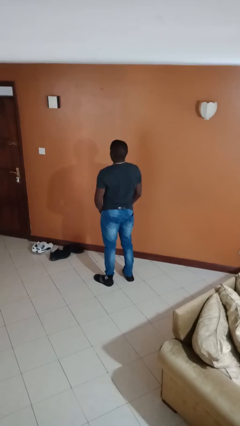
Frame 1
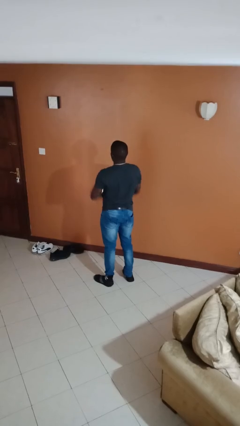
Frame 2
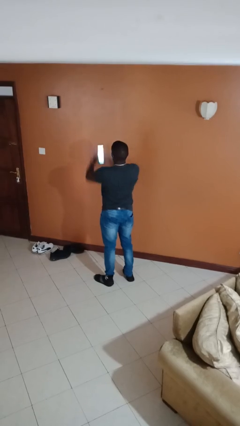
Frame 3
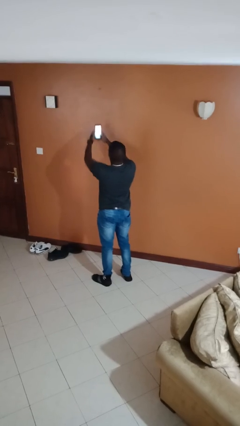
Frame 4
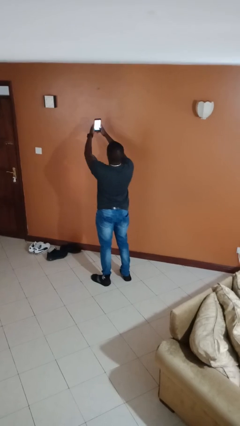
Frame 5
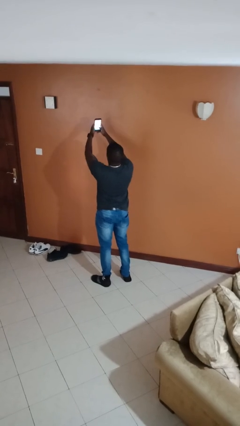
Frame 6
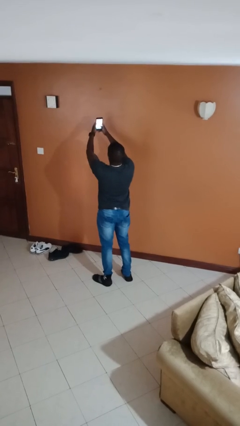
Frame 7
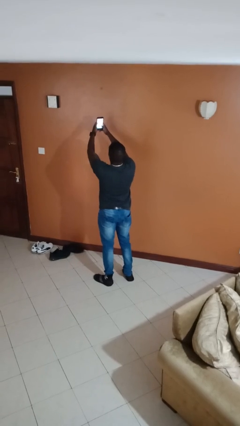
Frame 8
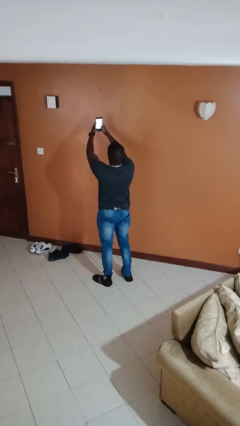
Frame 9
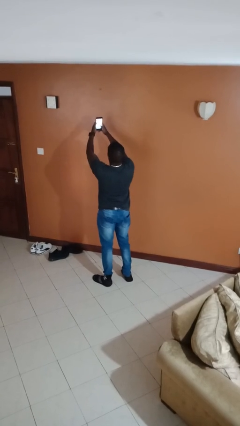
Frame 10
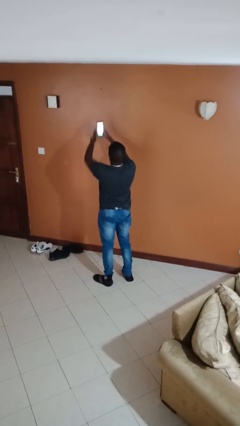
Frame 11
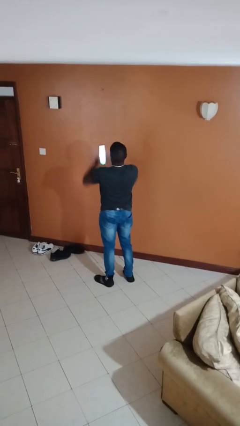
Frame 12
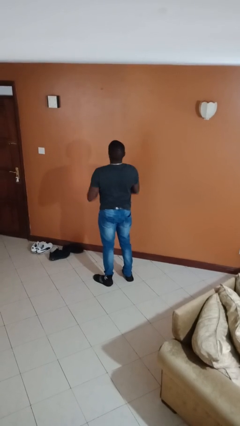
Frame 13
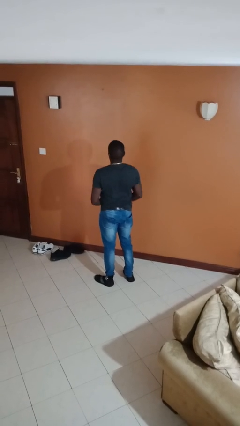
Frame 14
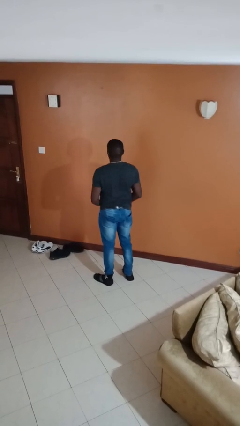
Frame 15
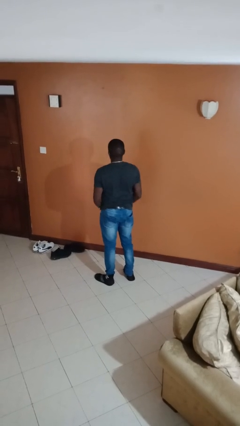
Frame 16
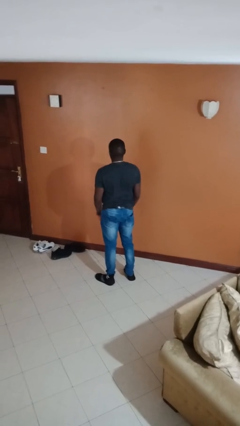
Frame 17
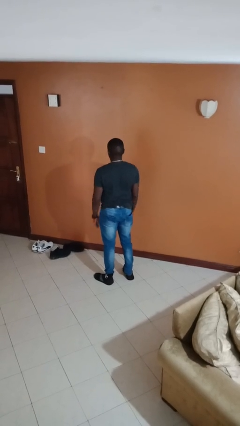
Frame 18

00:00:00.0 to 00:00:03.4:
person takes selfie

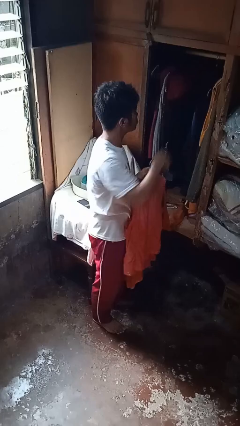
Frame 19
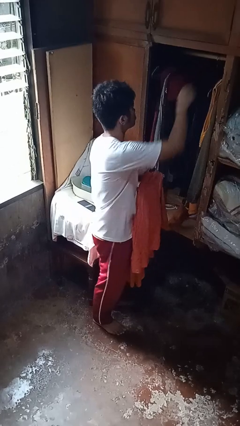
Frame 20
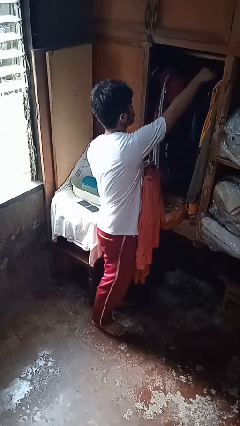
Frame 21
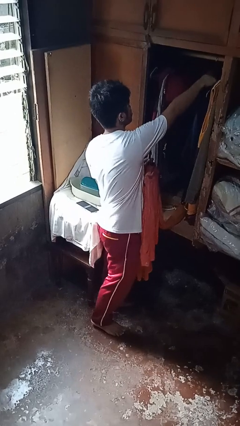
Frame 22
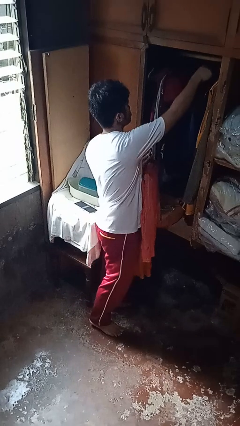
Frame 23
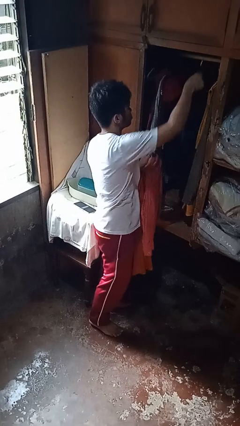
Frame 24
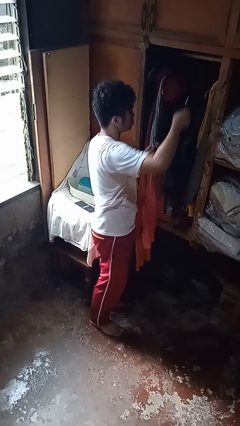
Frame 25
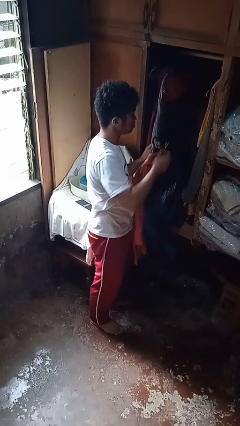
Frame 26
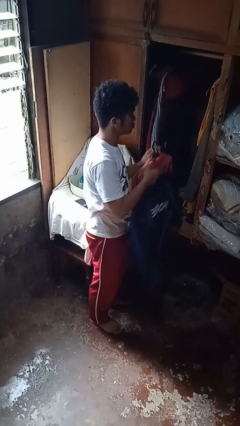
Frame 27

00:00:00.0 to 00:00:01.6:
person takes clothes from closet

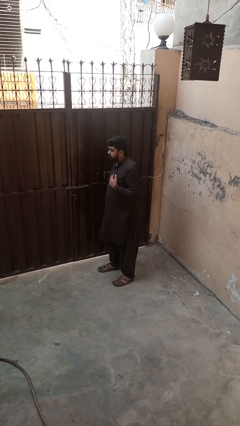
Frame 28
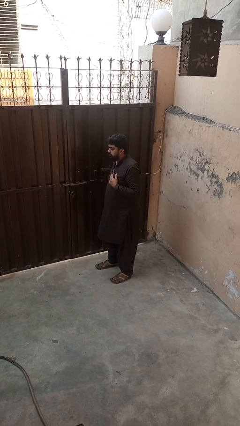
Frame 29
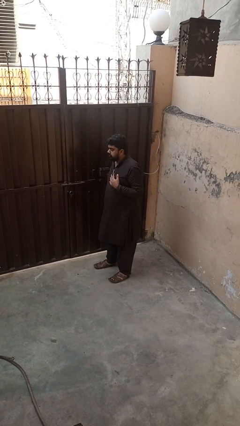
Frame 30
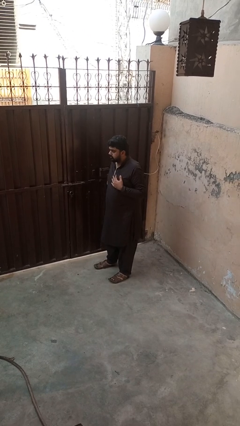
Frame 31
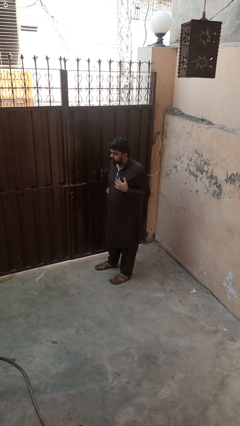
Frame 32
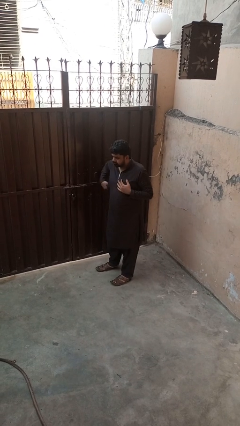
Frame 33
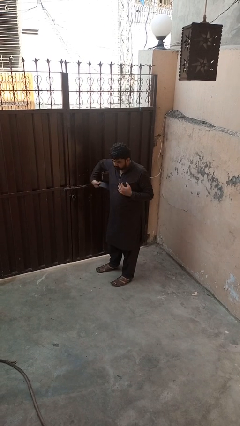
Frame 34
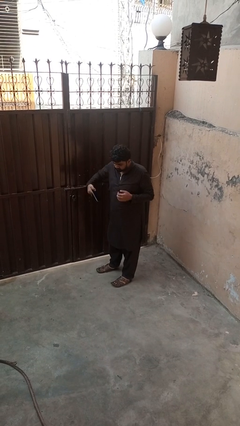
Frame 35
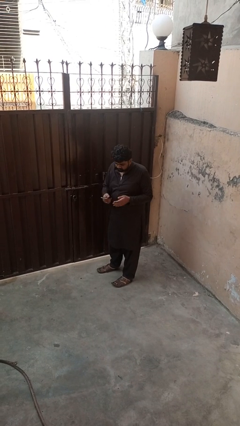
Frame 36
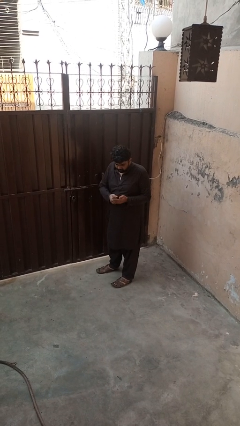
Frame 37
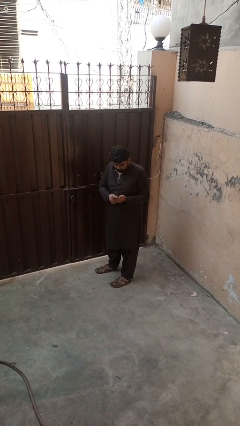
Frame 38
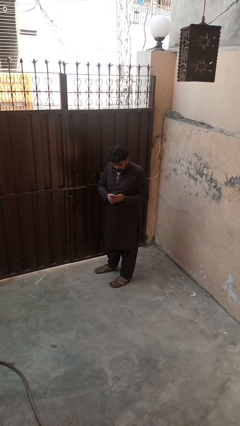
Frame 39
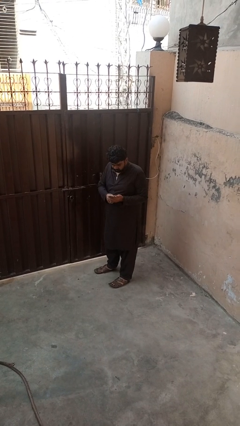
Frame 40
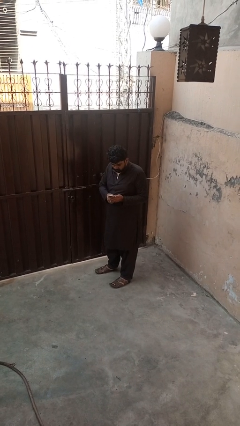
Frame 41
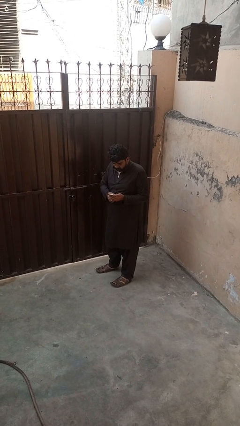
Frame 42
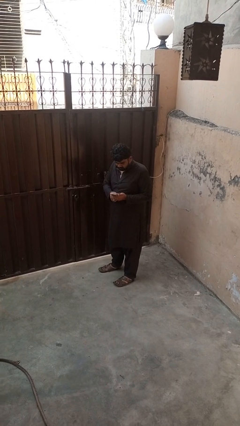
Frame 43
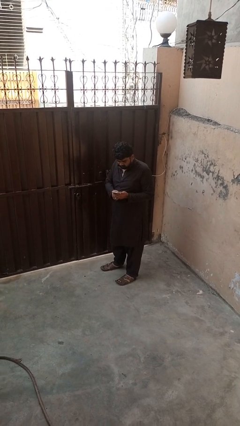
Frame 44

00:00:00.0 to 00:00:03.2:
person takes phone from pocket

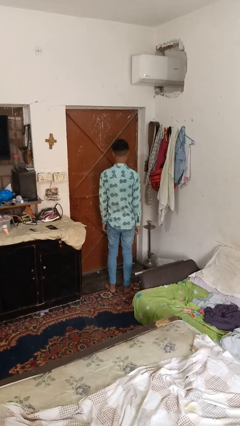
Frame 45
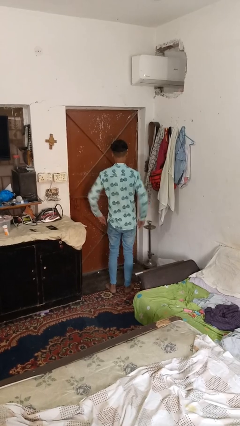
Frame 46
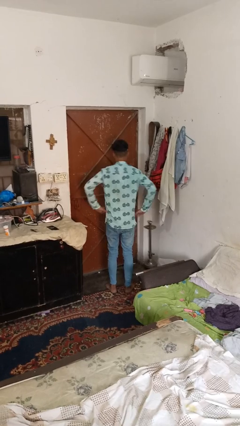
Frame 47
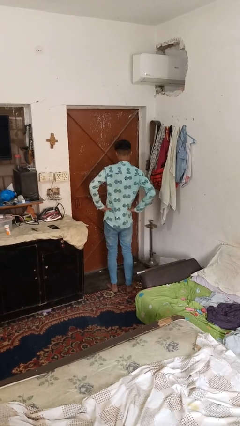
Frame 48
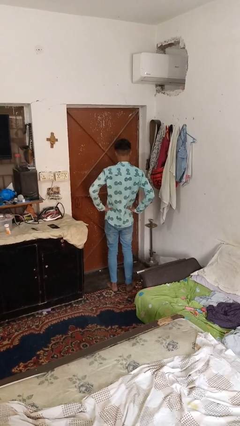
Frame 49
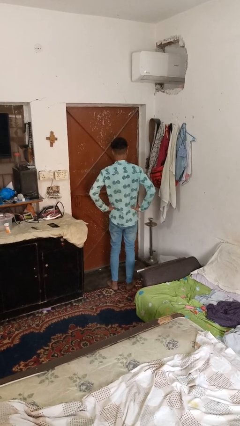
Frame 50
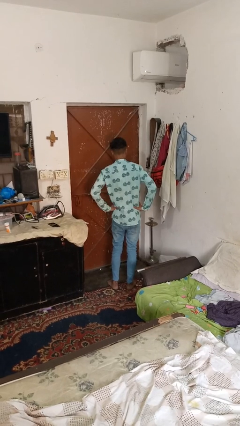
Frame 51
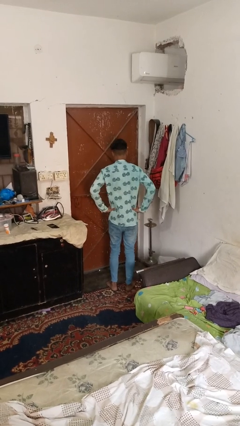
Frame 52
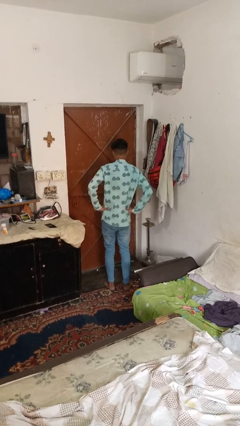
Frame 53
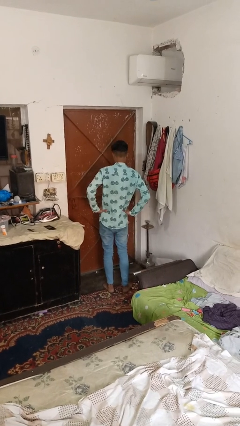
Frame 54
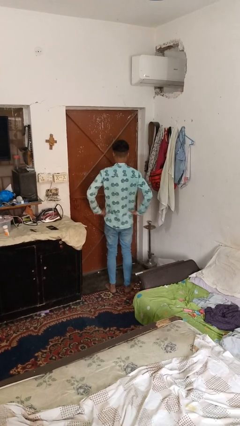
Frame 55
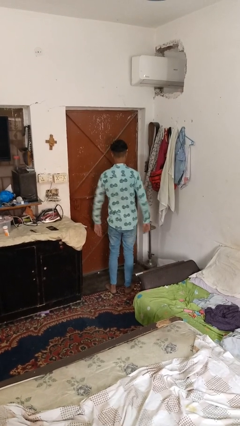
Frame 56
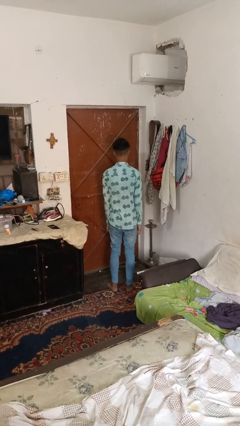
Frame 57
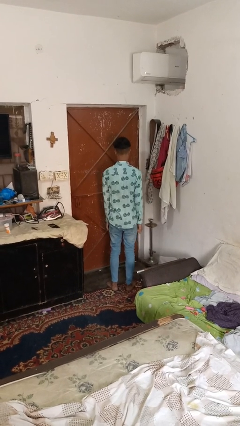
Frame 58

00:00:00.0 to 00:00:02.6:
person wiggles hips

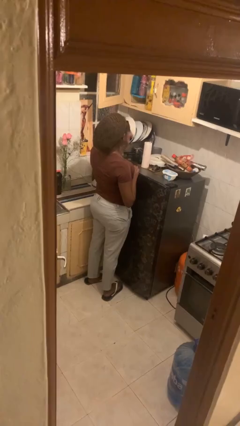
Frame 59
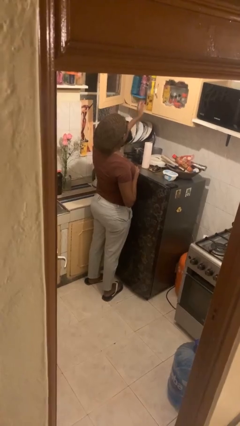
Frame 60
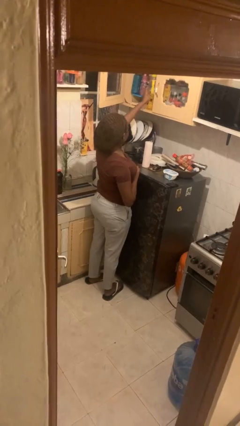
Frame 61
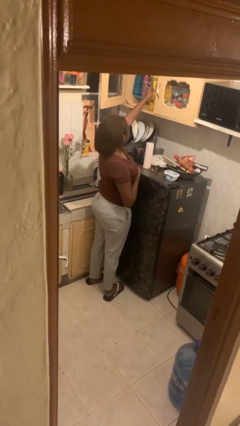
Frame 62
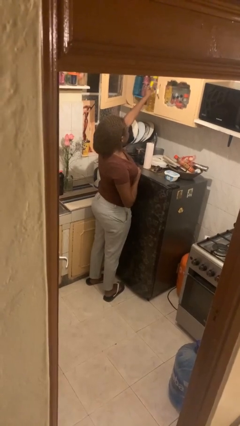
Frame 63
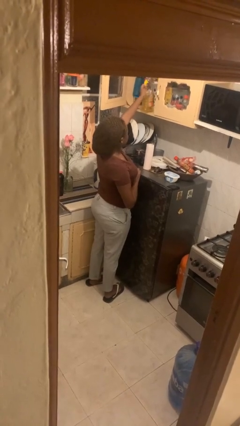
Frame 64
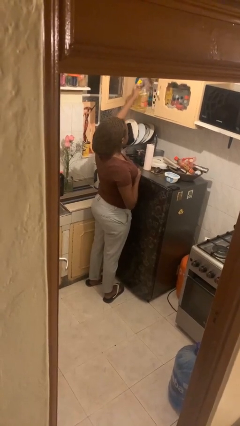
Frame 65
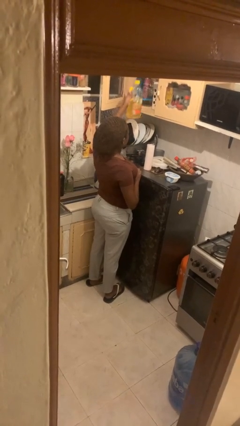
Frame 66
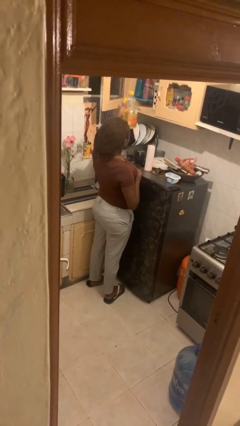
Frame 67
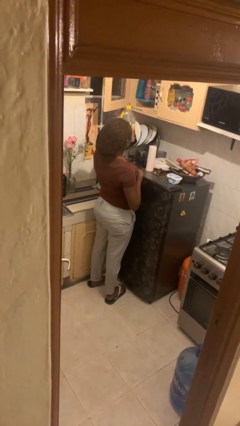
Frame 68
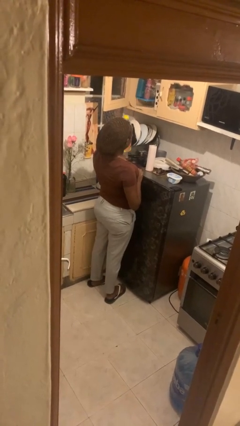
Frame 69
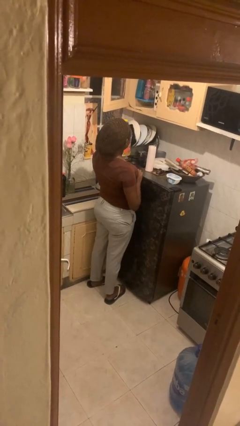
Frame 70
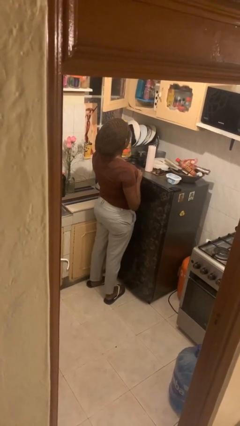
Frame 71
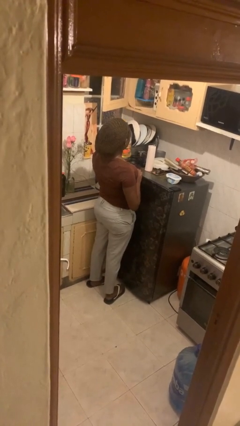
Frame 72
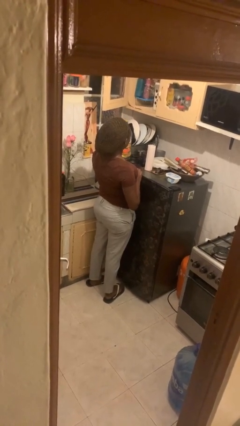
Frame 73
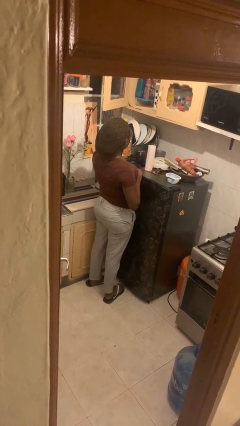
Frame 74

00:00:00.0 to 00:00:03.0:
person picks up object from cabinet

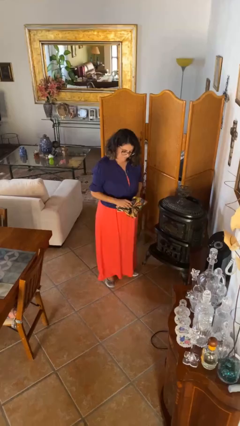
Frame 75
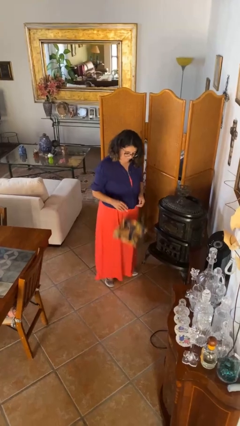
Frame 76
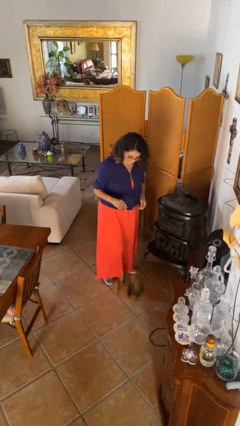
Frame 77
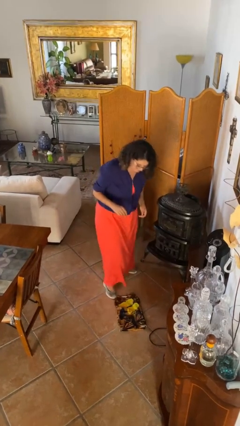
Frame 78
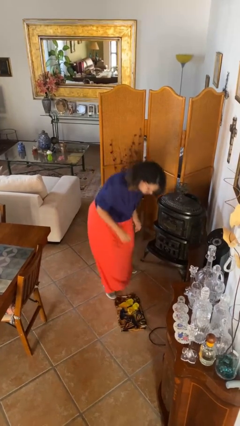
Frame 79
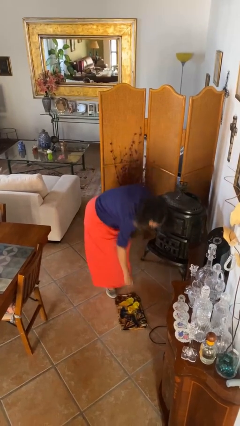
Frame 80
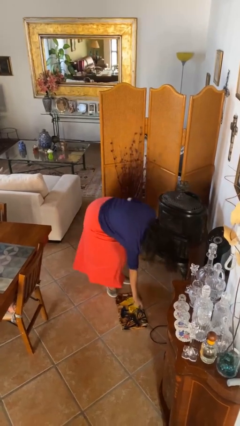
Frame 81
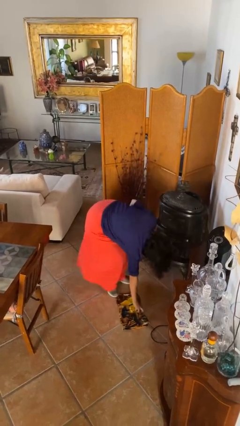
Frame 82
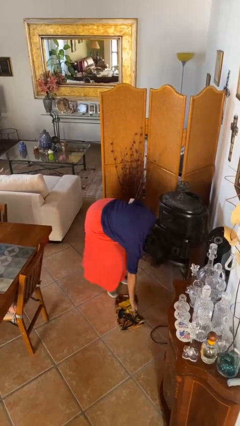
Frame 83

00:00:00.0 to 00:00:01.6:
person drops object

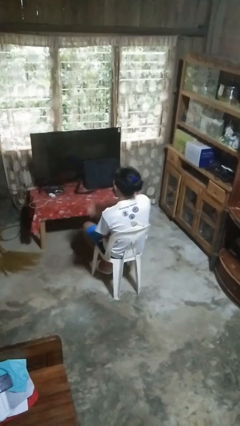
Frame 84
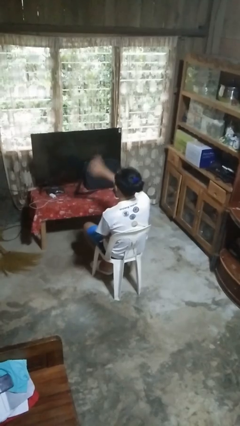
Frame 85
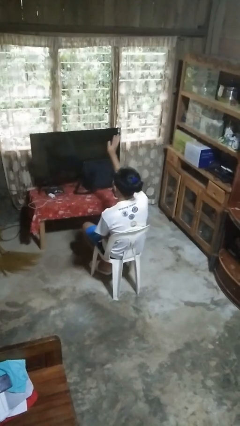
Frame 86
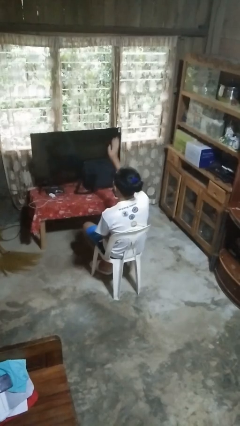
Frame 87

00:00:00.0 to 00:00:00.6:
person gestures swipe up

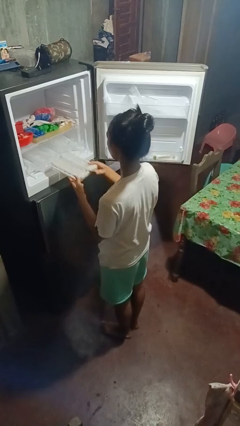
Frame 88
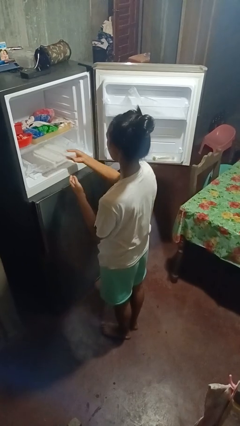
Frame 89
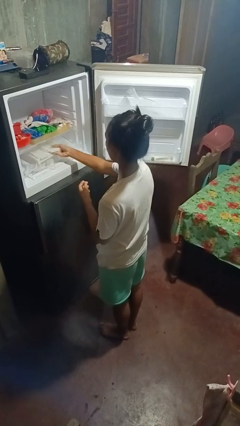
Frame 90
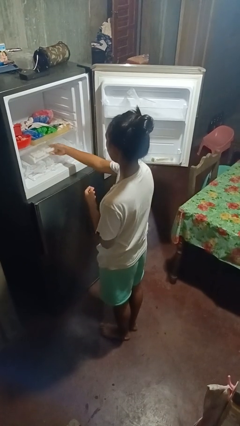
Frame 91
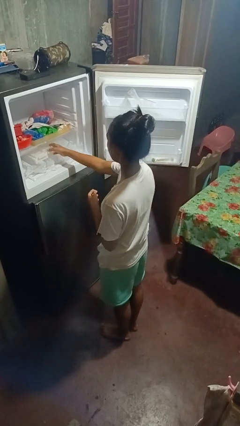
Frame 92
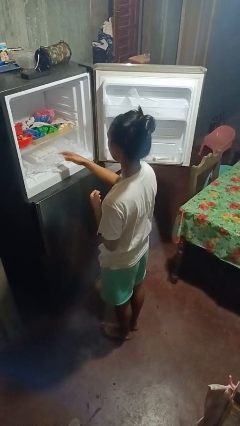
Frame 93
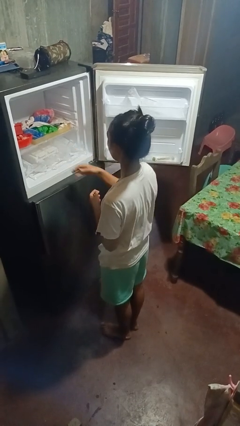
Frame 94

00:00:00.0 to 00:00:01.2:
person puts object into refrigerator

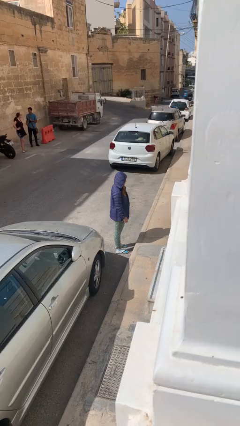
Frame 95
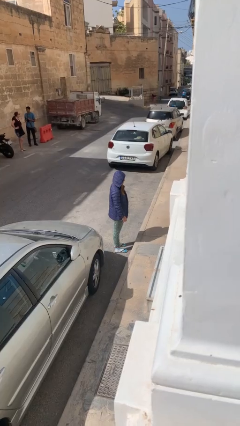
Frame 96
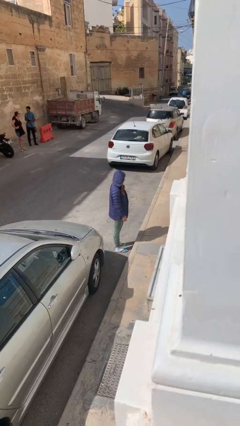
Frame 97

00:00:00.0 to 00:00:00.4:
person blows into hands
